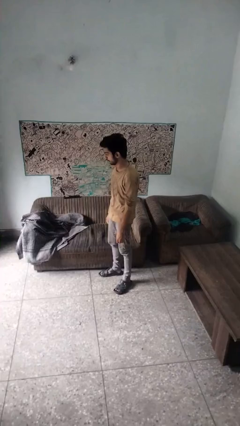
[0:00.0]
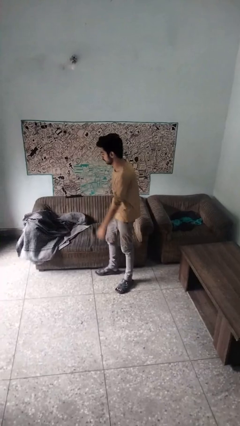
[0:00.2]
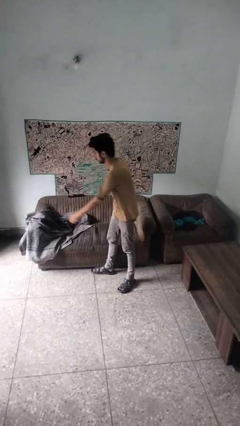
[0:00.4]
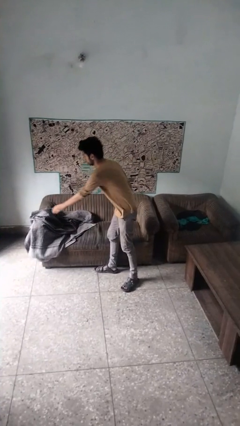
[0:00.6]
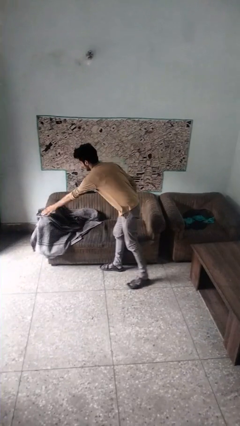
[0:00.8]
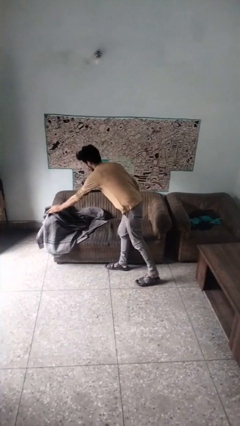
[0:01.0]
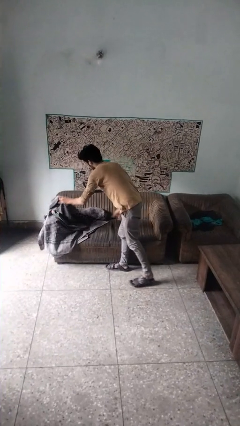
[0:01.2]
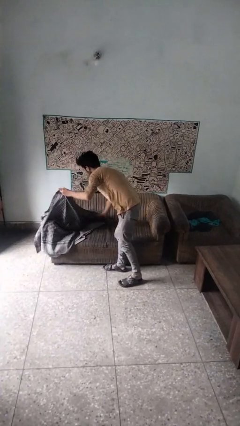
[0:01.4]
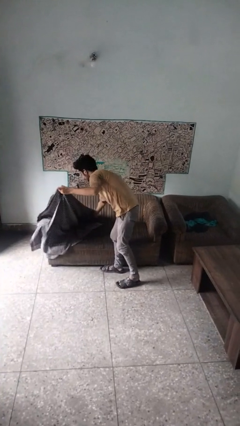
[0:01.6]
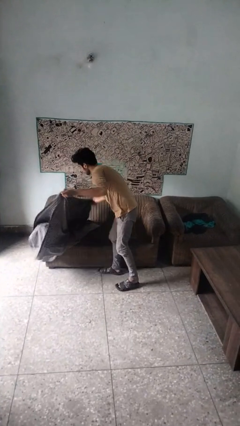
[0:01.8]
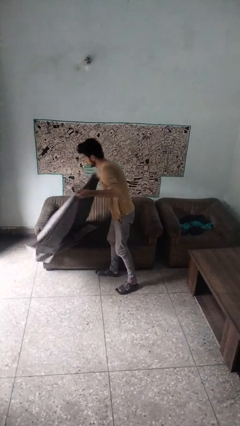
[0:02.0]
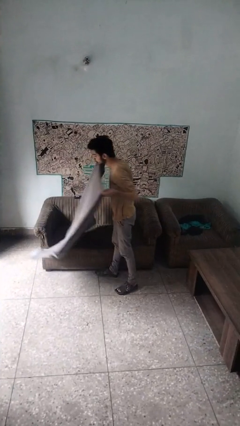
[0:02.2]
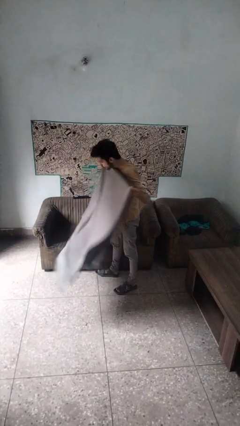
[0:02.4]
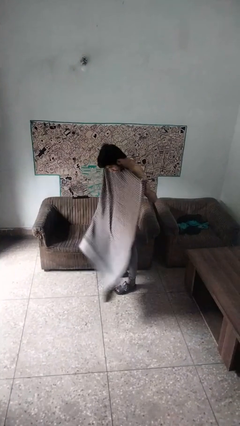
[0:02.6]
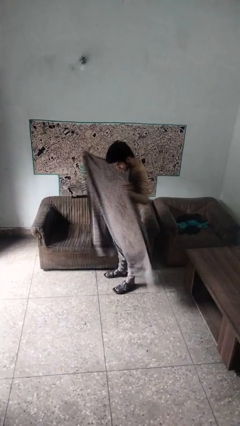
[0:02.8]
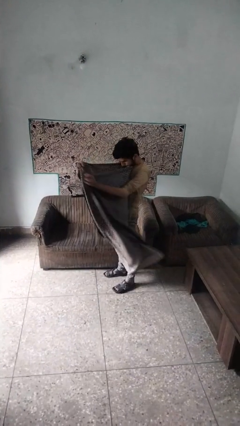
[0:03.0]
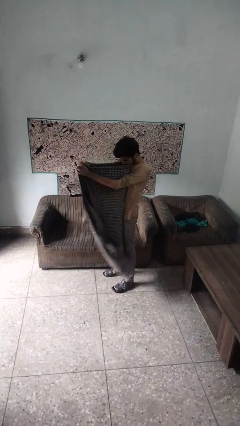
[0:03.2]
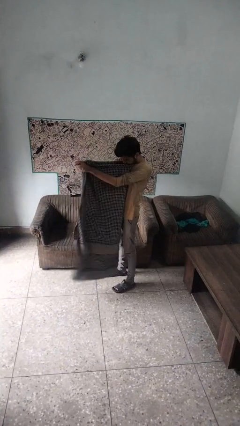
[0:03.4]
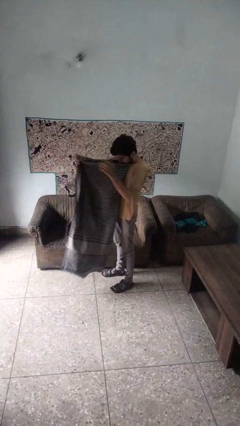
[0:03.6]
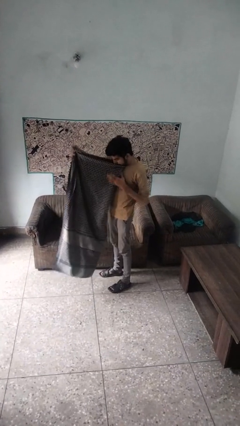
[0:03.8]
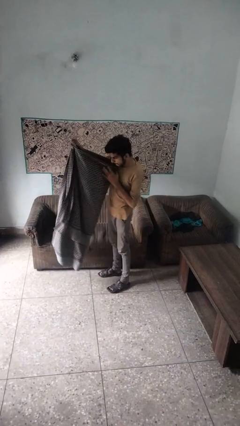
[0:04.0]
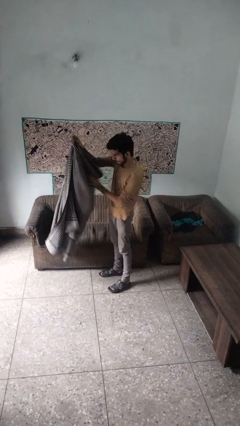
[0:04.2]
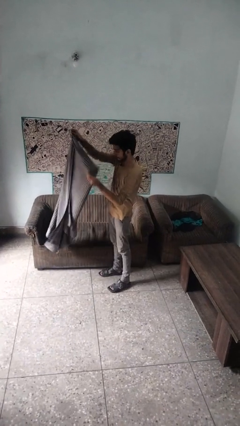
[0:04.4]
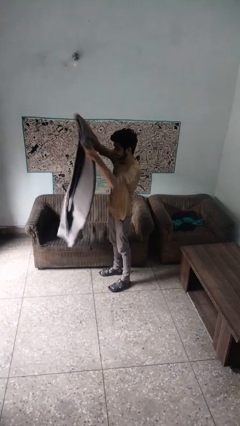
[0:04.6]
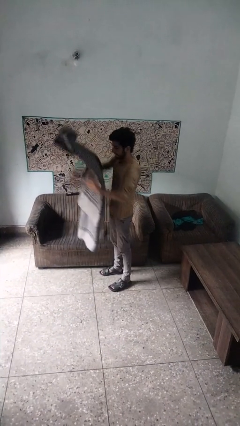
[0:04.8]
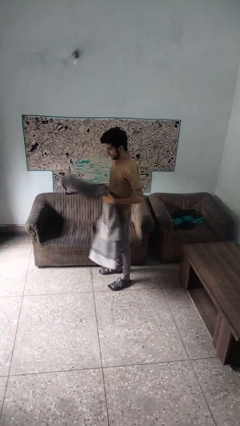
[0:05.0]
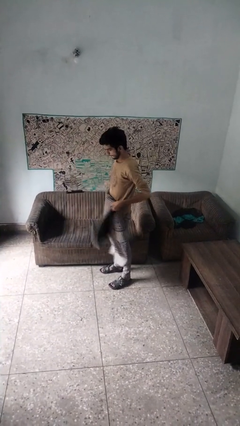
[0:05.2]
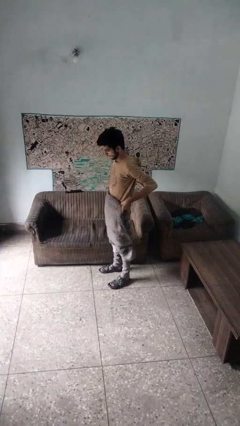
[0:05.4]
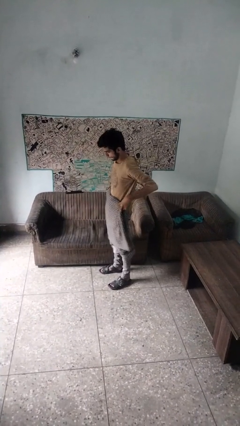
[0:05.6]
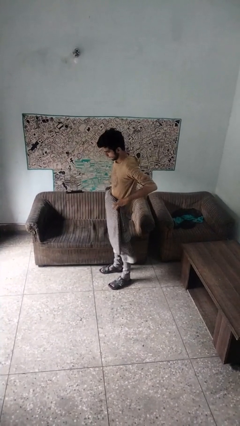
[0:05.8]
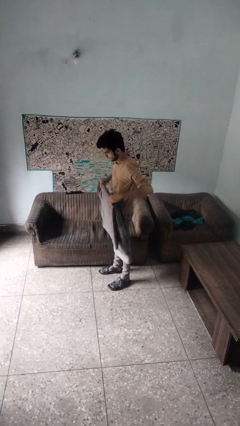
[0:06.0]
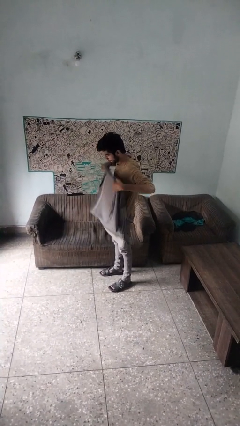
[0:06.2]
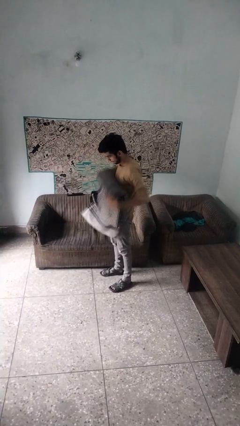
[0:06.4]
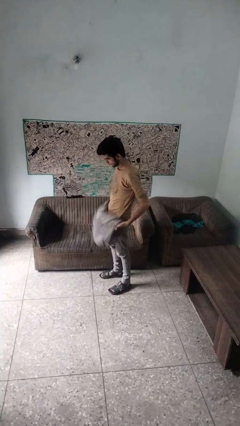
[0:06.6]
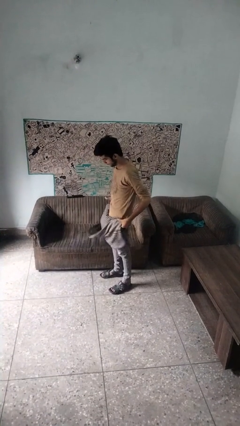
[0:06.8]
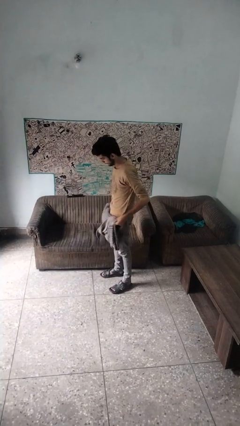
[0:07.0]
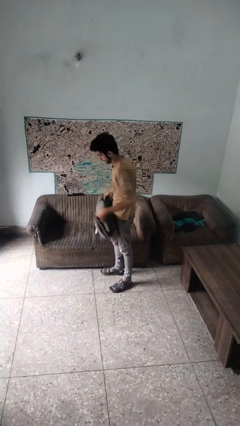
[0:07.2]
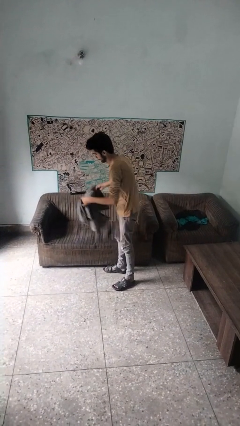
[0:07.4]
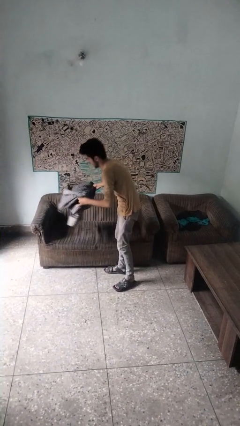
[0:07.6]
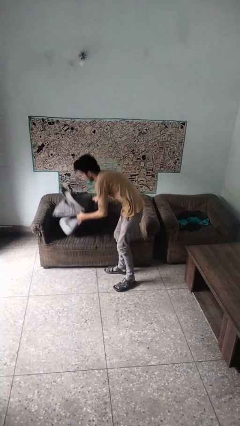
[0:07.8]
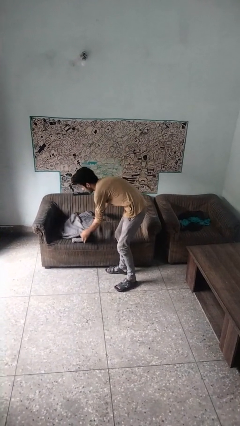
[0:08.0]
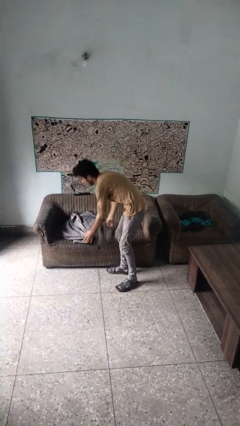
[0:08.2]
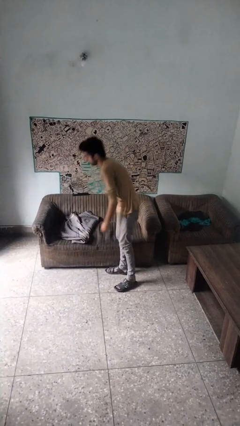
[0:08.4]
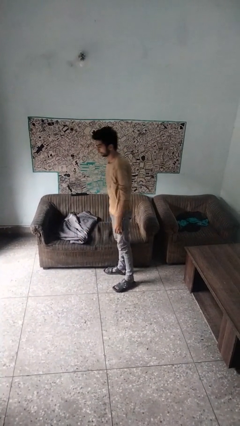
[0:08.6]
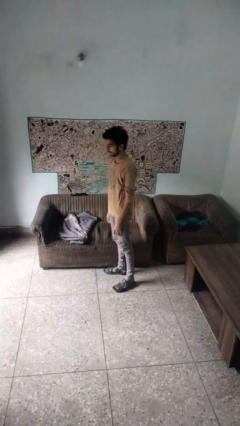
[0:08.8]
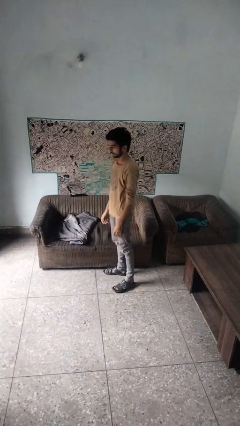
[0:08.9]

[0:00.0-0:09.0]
person folds blanket

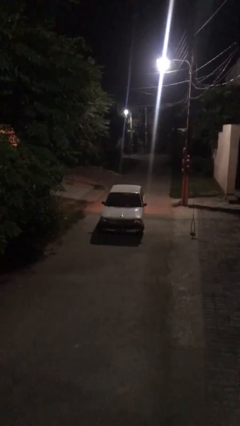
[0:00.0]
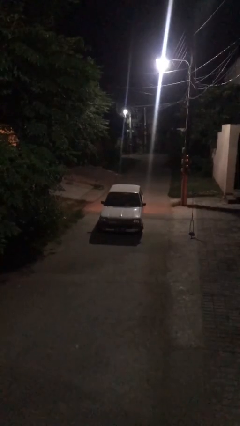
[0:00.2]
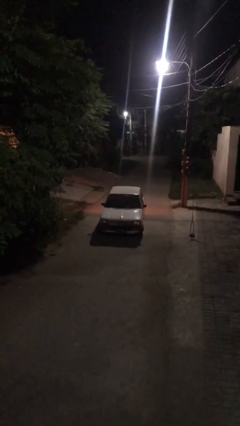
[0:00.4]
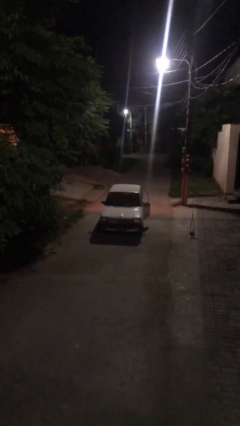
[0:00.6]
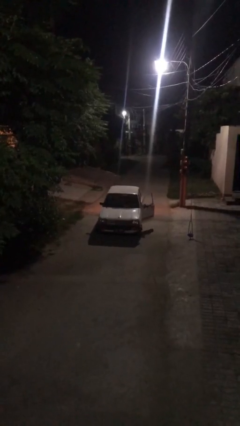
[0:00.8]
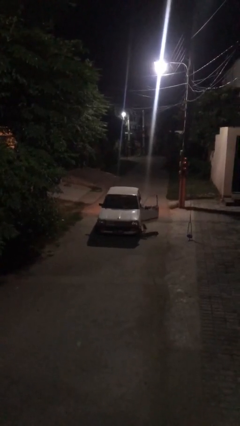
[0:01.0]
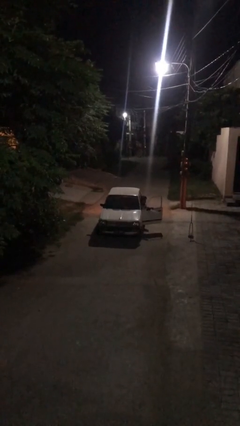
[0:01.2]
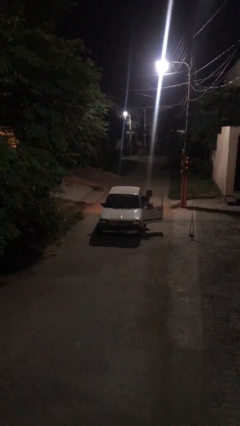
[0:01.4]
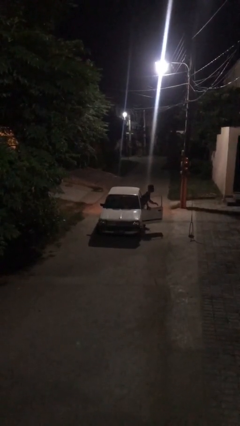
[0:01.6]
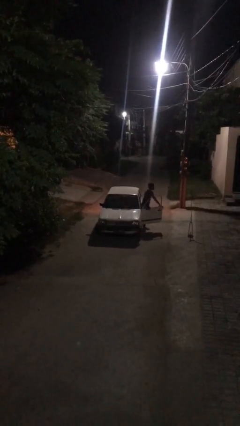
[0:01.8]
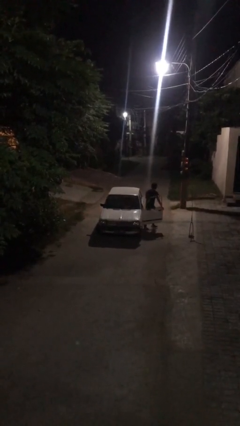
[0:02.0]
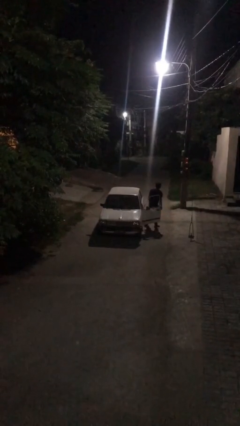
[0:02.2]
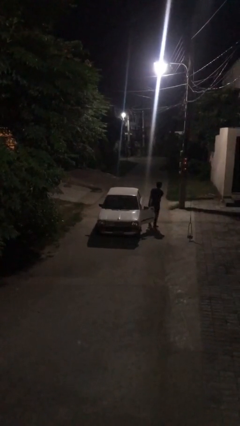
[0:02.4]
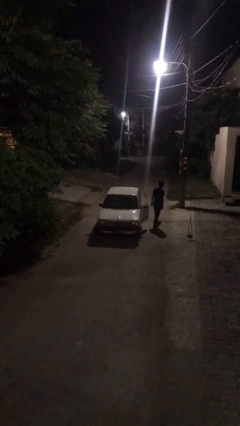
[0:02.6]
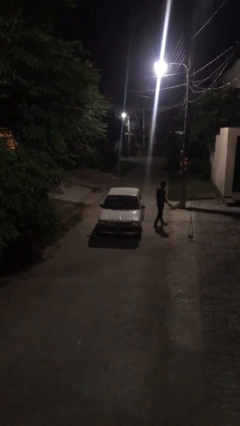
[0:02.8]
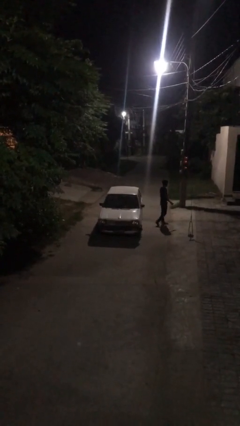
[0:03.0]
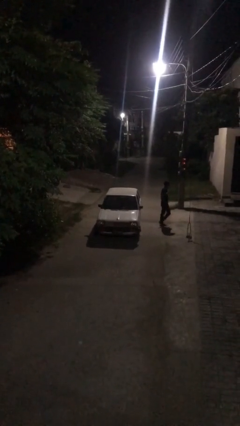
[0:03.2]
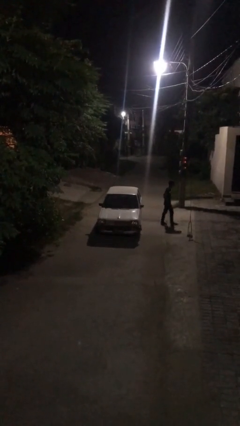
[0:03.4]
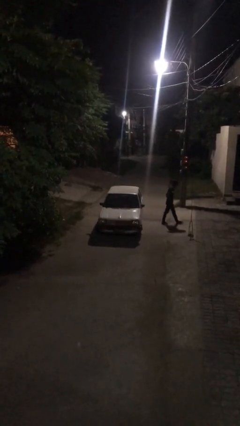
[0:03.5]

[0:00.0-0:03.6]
car drops off person

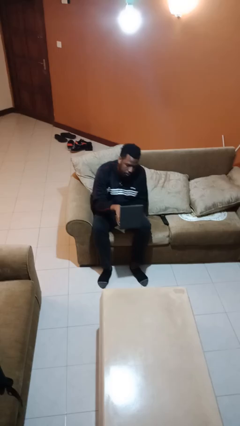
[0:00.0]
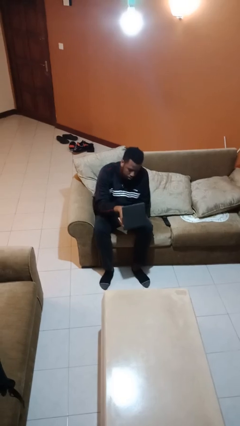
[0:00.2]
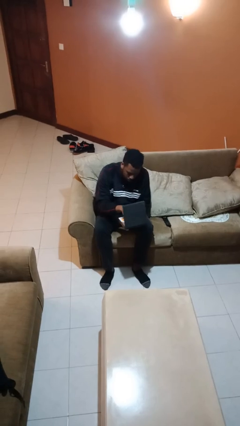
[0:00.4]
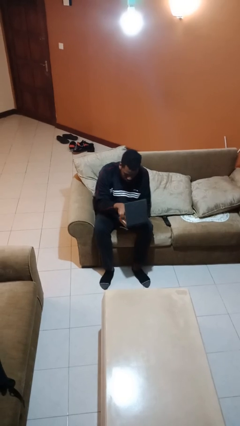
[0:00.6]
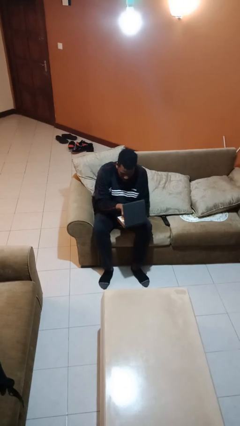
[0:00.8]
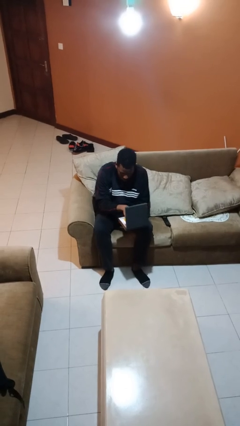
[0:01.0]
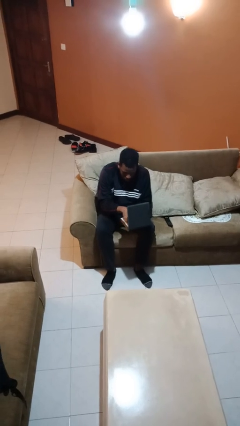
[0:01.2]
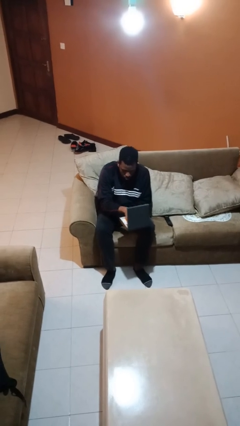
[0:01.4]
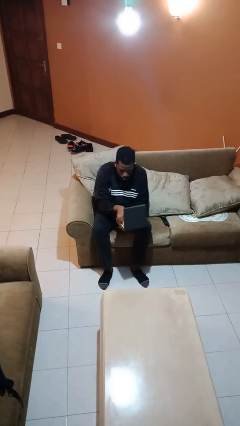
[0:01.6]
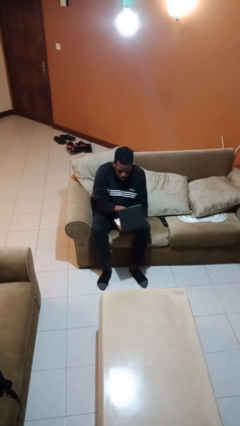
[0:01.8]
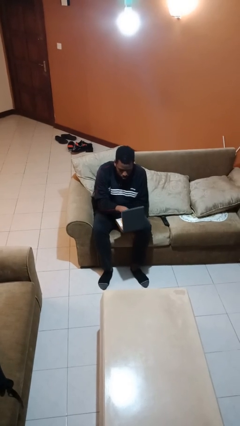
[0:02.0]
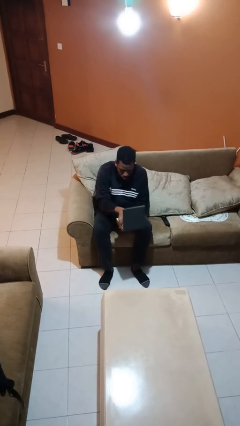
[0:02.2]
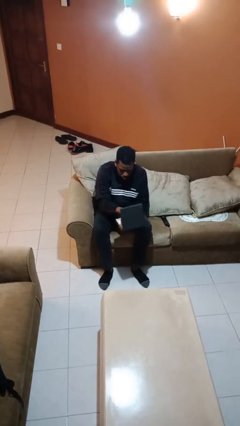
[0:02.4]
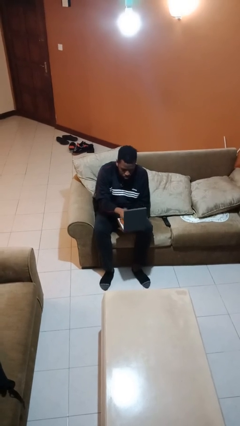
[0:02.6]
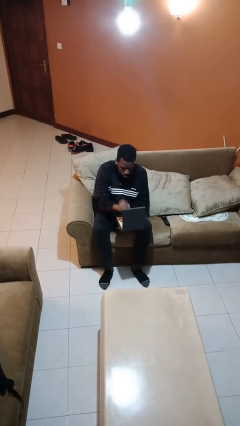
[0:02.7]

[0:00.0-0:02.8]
person searches jewelry box

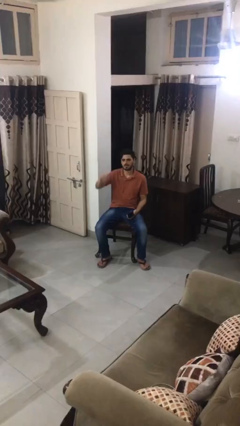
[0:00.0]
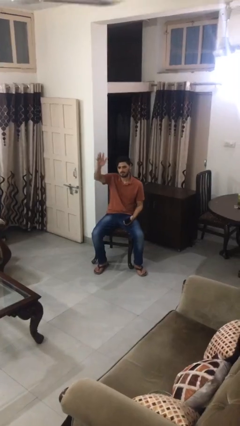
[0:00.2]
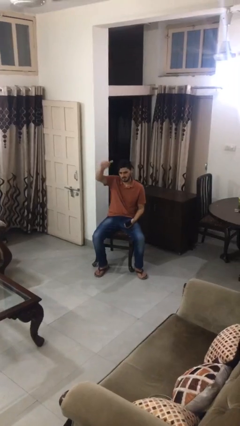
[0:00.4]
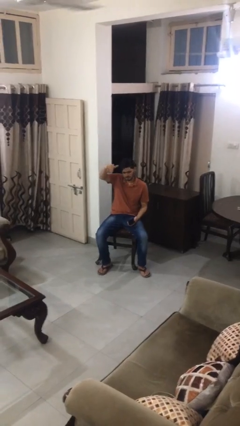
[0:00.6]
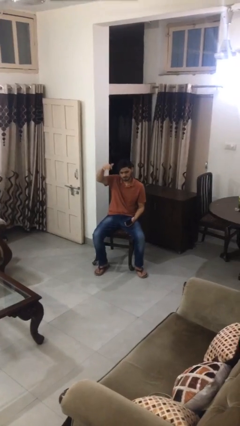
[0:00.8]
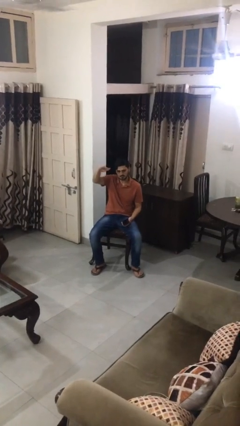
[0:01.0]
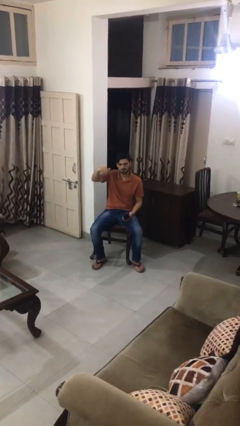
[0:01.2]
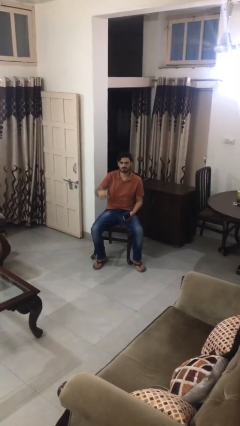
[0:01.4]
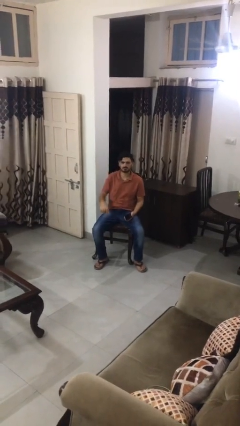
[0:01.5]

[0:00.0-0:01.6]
person gestures come here

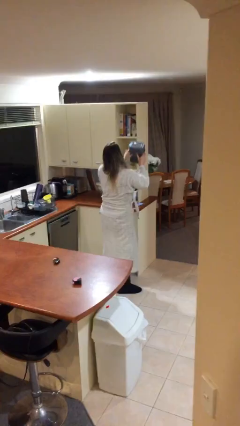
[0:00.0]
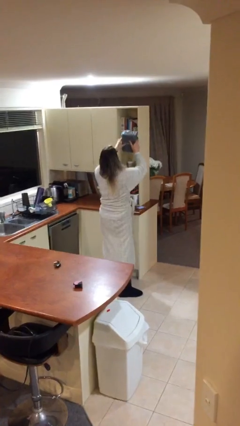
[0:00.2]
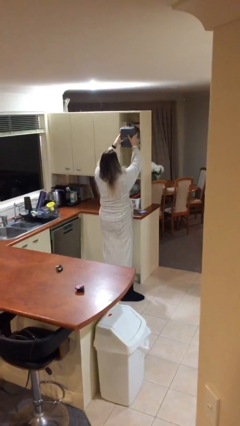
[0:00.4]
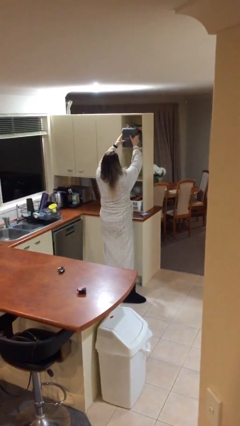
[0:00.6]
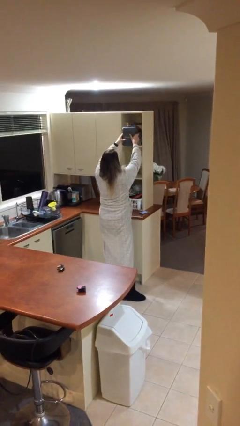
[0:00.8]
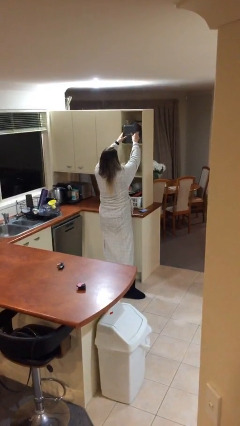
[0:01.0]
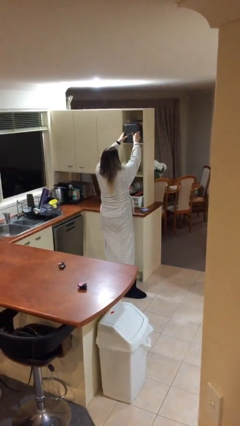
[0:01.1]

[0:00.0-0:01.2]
person puts down object on shelf
